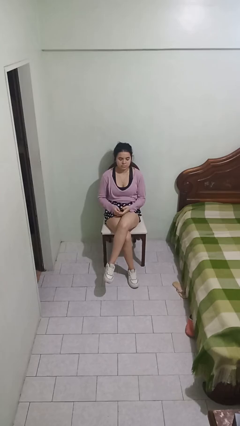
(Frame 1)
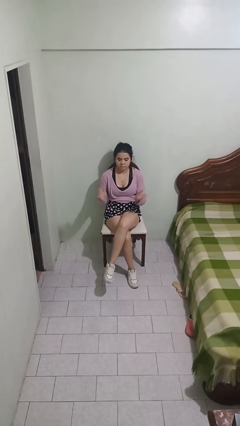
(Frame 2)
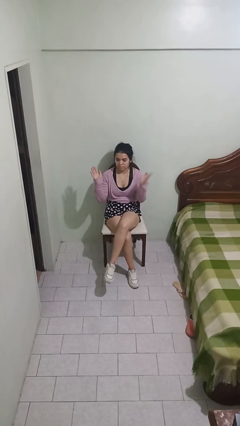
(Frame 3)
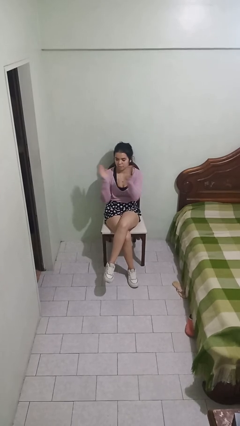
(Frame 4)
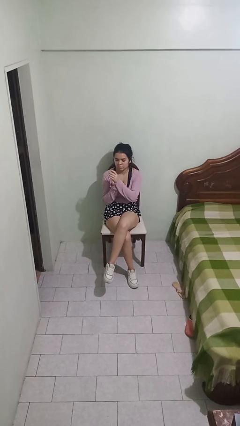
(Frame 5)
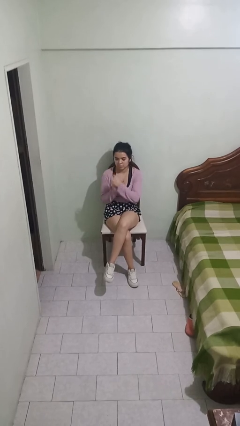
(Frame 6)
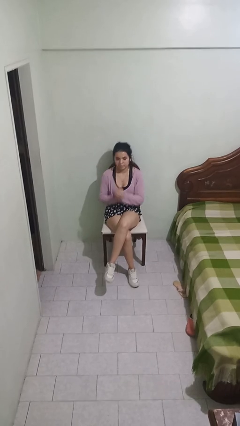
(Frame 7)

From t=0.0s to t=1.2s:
person claps hands

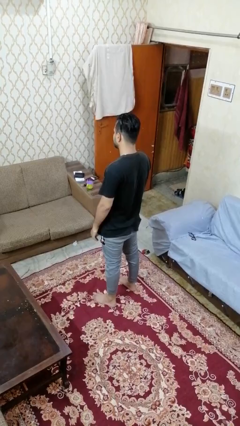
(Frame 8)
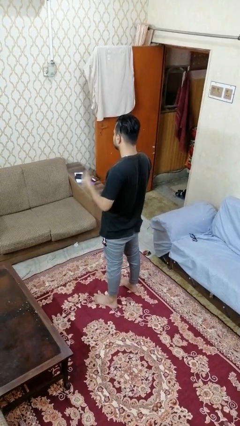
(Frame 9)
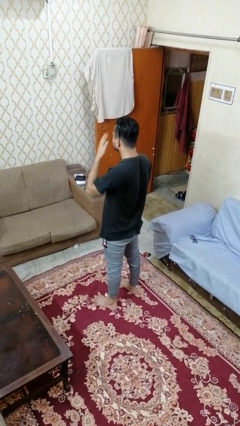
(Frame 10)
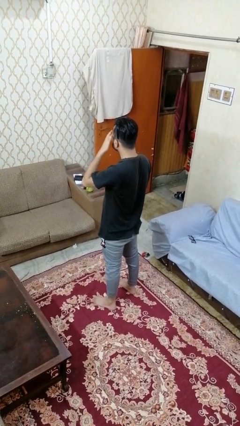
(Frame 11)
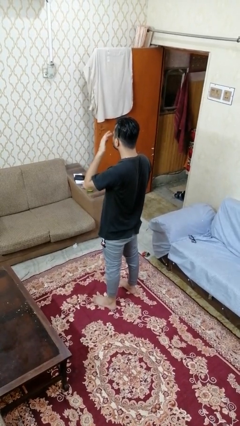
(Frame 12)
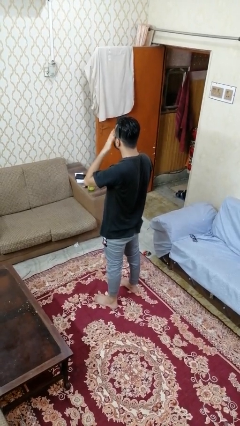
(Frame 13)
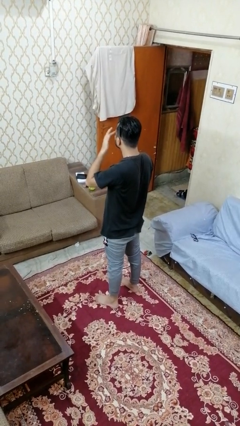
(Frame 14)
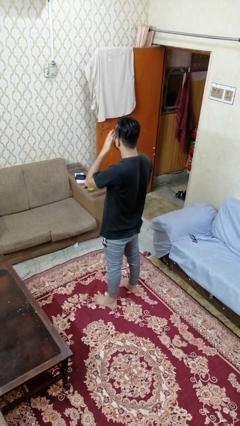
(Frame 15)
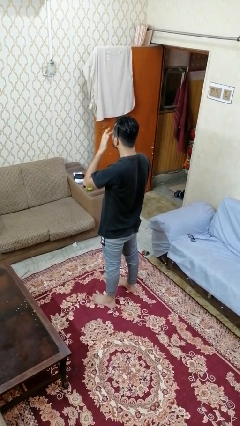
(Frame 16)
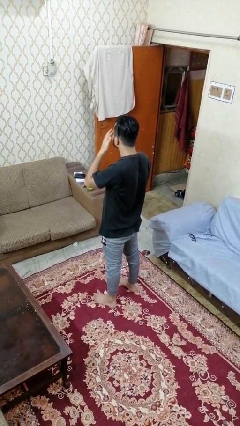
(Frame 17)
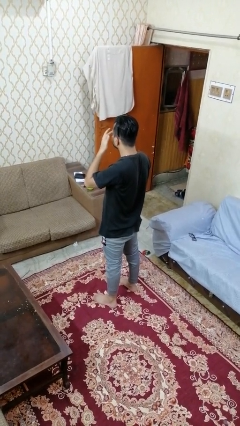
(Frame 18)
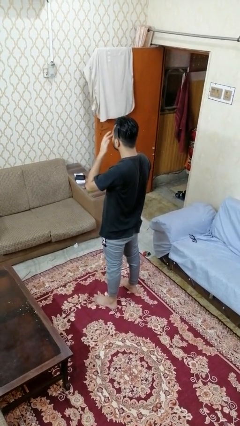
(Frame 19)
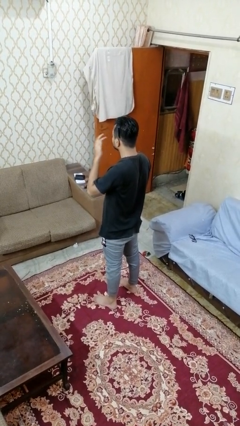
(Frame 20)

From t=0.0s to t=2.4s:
person rubs eyes

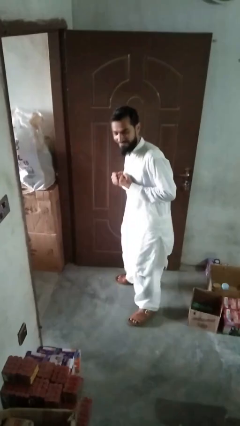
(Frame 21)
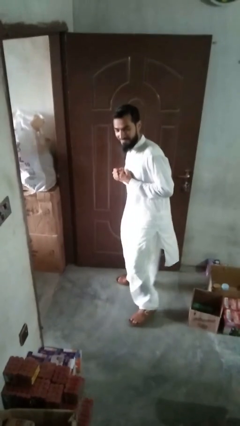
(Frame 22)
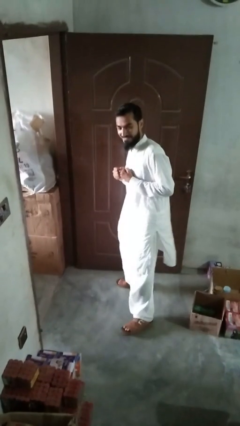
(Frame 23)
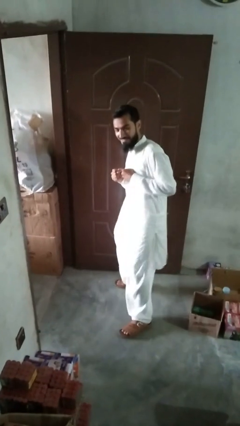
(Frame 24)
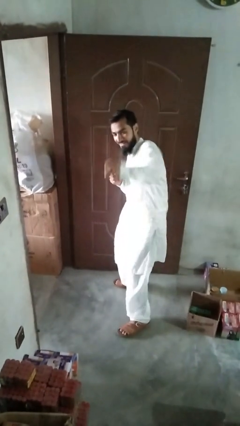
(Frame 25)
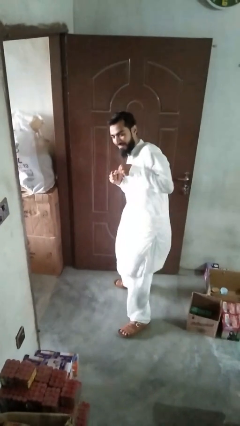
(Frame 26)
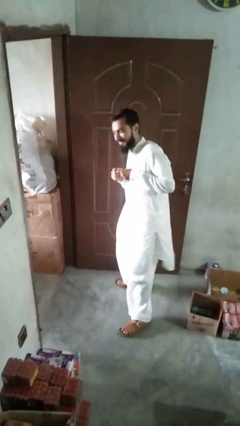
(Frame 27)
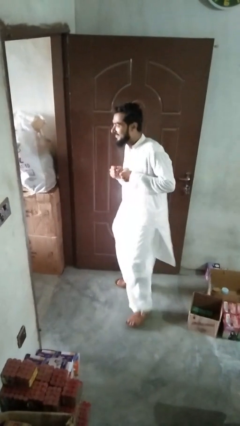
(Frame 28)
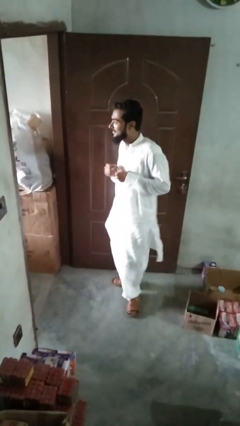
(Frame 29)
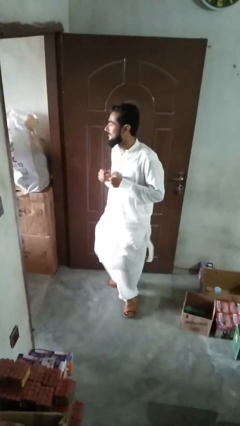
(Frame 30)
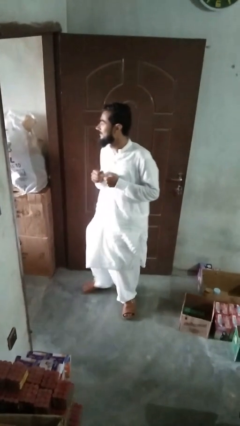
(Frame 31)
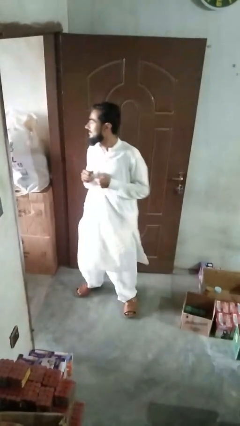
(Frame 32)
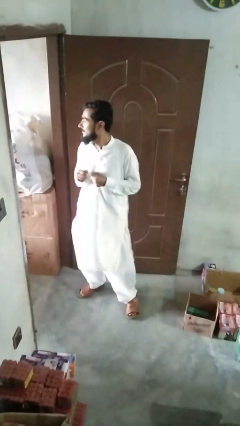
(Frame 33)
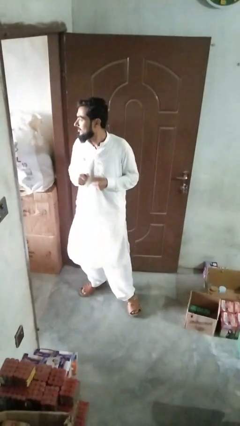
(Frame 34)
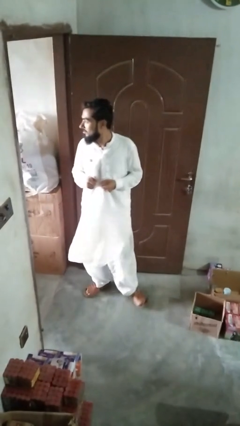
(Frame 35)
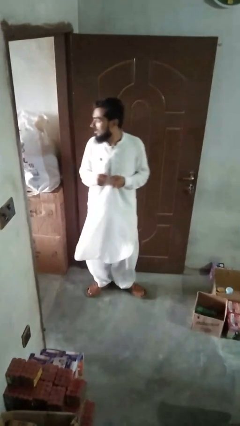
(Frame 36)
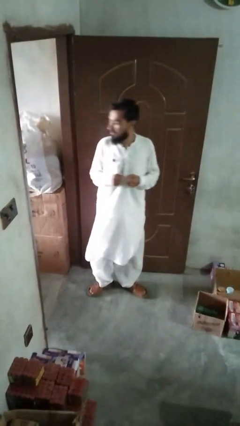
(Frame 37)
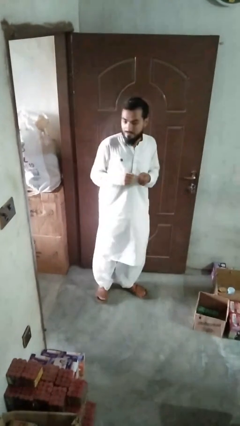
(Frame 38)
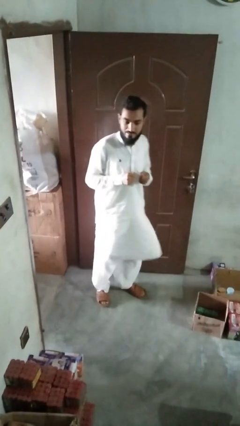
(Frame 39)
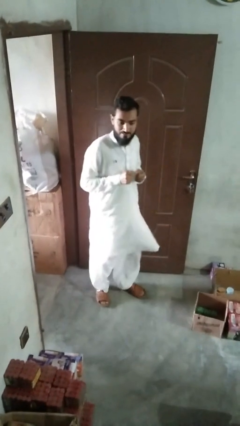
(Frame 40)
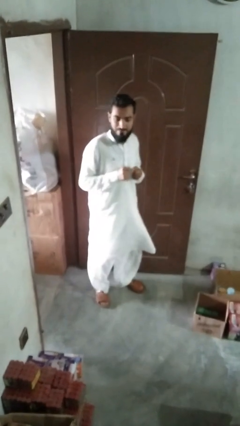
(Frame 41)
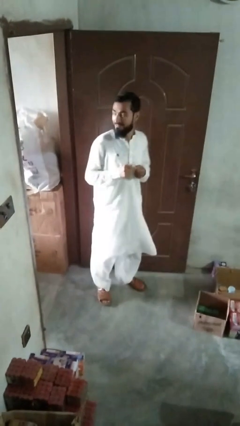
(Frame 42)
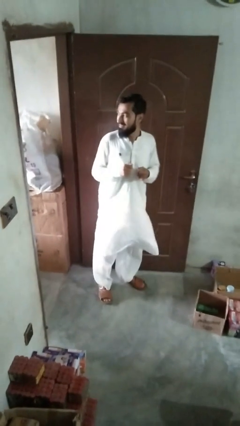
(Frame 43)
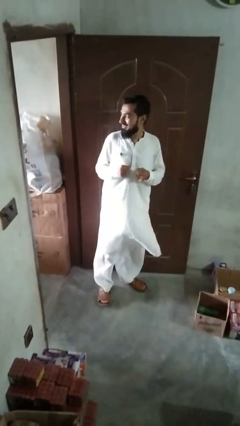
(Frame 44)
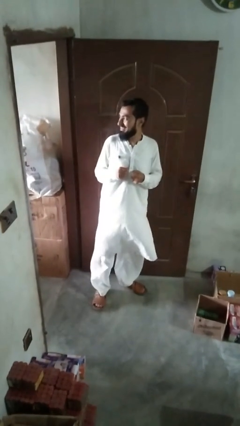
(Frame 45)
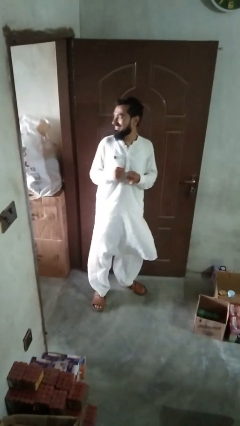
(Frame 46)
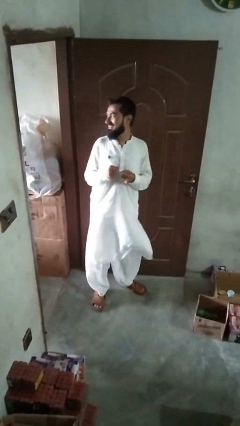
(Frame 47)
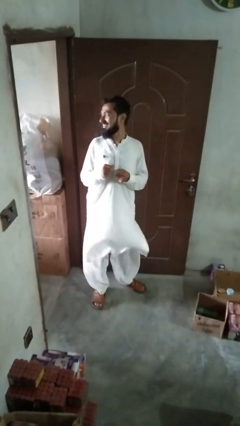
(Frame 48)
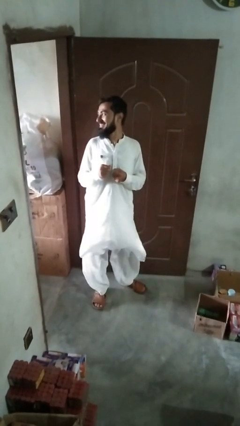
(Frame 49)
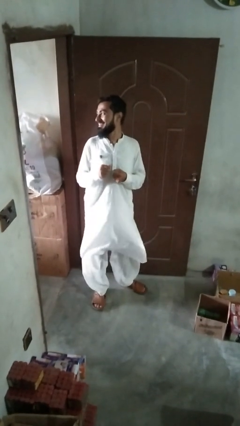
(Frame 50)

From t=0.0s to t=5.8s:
person karate chop

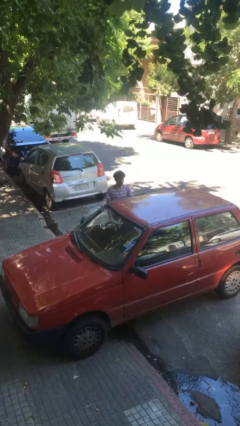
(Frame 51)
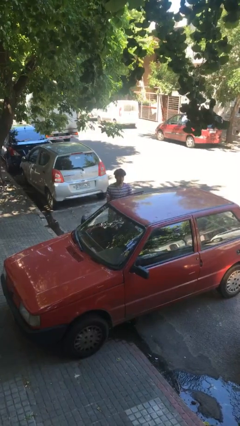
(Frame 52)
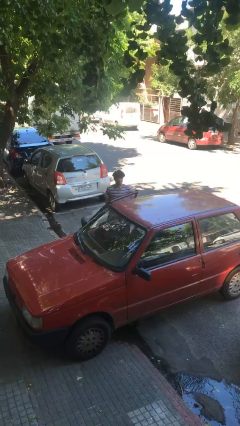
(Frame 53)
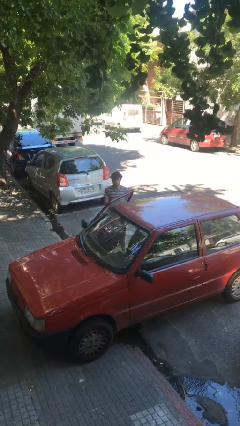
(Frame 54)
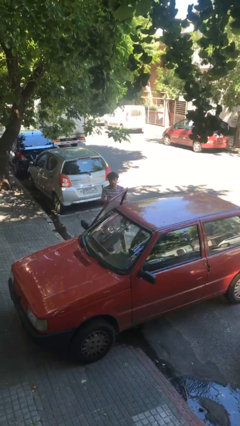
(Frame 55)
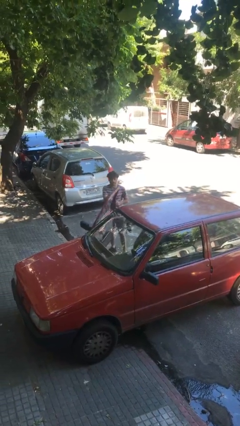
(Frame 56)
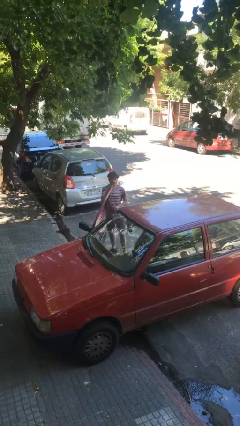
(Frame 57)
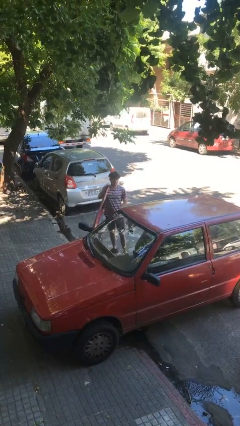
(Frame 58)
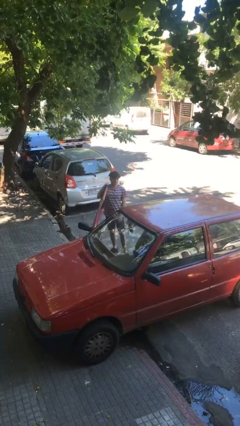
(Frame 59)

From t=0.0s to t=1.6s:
person opens car door

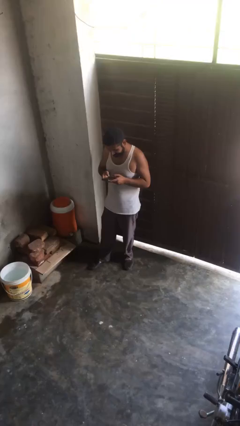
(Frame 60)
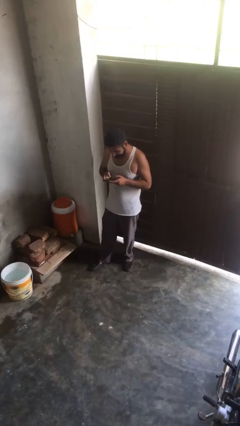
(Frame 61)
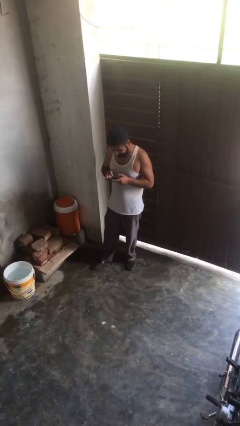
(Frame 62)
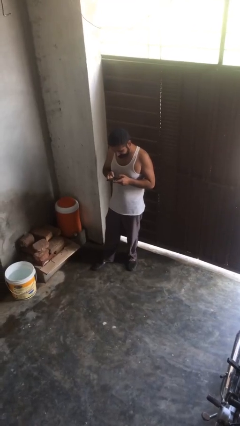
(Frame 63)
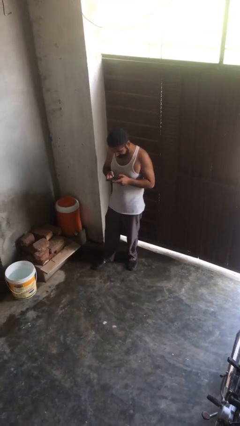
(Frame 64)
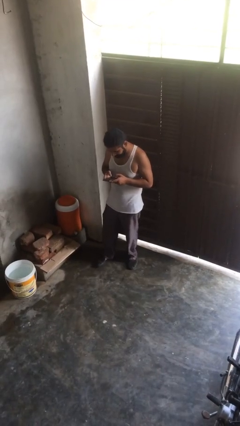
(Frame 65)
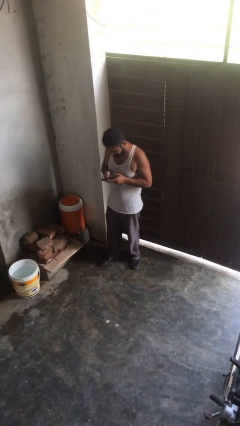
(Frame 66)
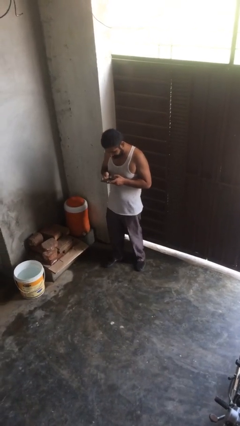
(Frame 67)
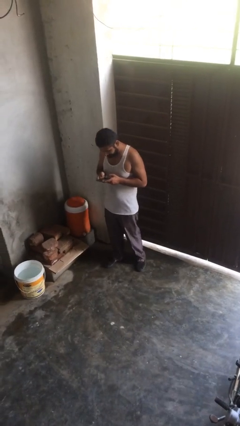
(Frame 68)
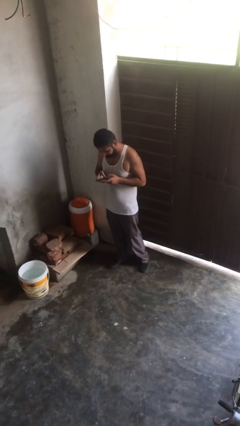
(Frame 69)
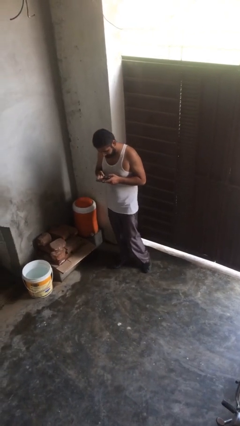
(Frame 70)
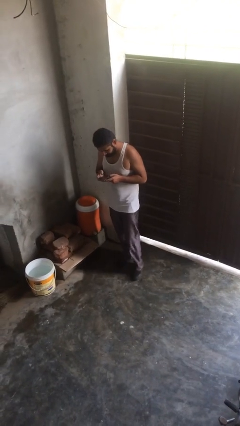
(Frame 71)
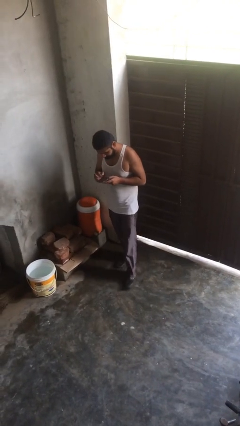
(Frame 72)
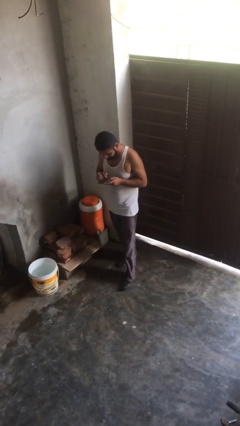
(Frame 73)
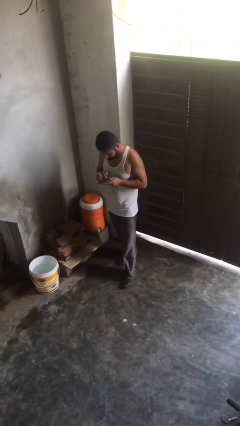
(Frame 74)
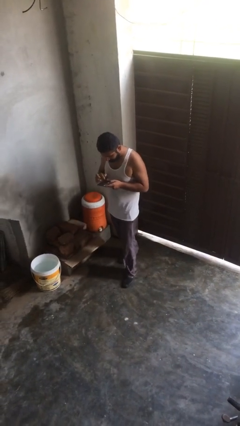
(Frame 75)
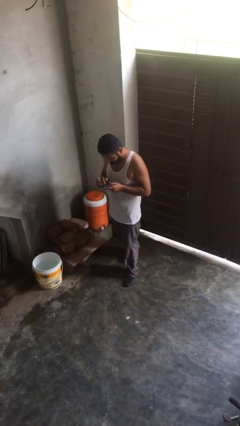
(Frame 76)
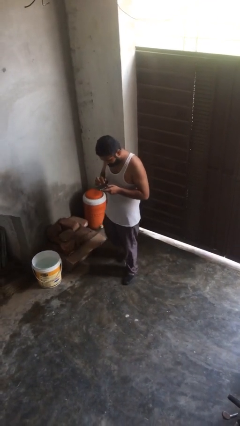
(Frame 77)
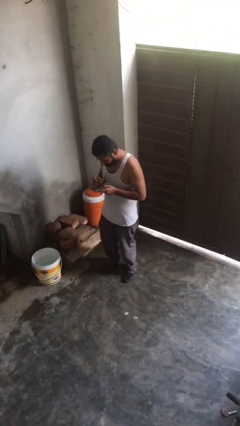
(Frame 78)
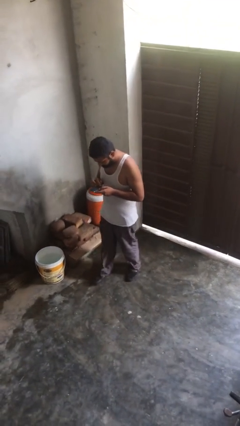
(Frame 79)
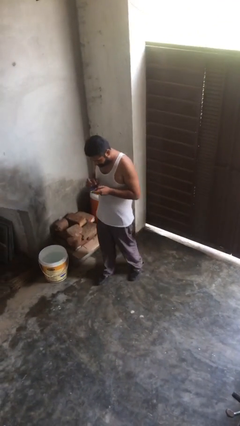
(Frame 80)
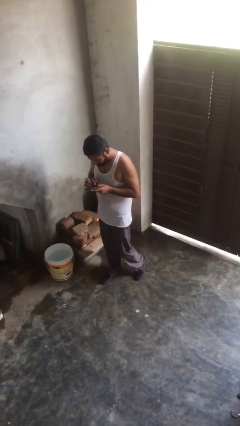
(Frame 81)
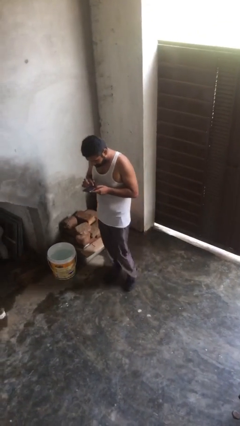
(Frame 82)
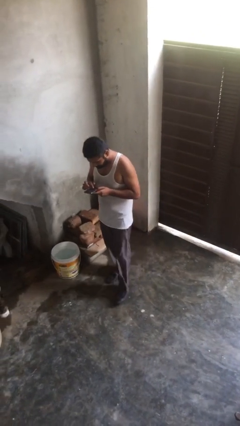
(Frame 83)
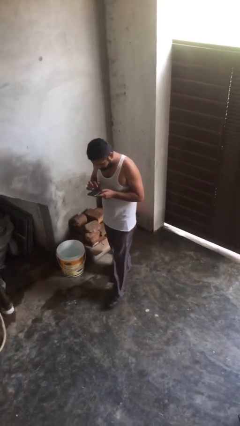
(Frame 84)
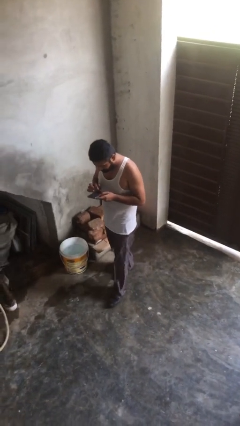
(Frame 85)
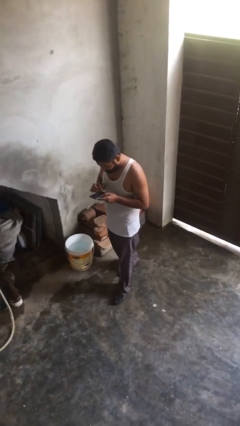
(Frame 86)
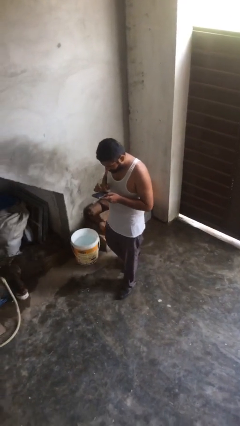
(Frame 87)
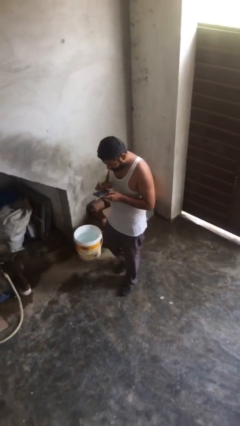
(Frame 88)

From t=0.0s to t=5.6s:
person texts on phone

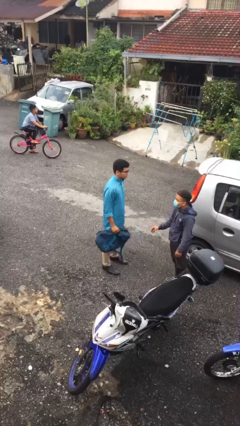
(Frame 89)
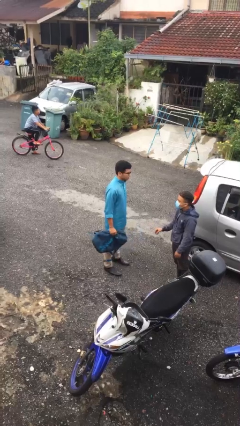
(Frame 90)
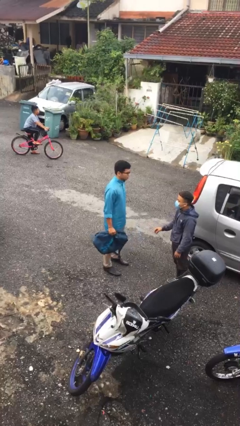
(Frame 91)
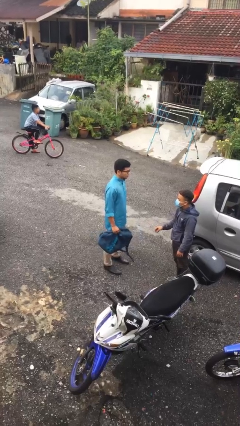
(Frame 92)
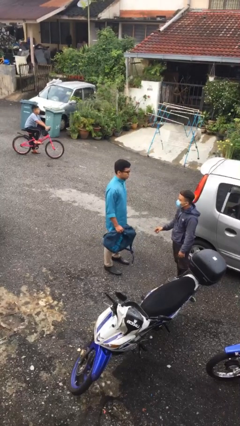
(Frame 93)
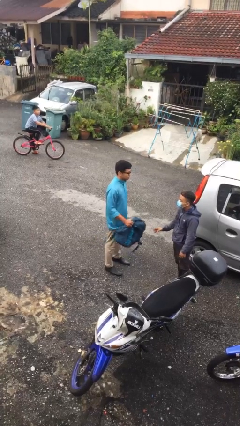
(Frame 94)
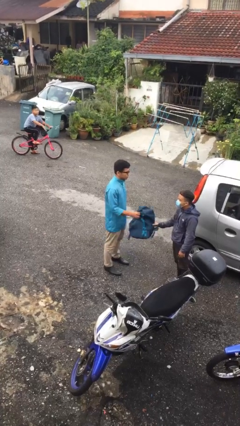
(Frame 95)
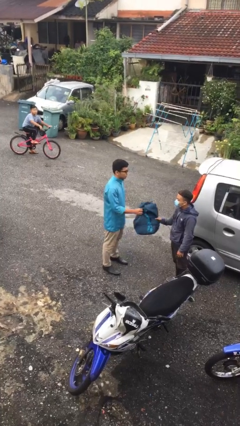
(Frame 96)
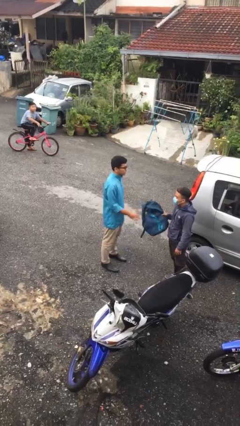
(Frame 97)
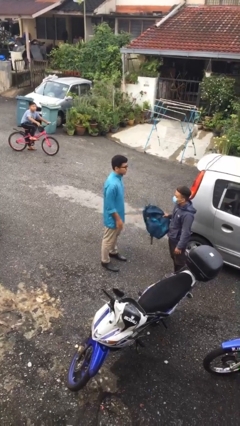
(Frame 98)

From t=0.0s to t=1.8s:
person transfers object to person
